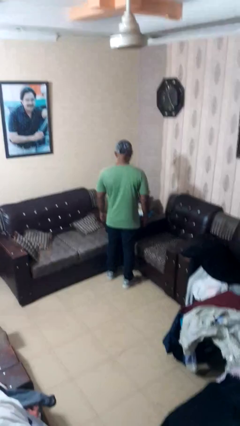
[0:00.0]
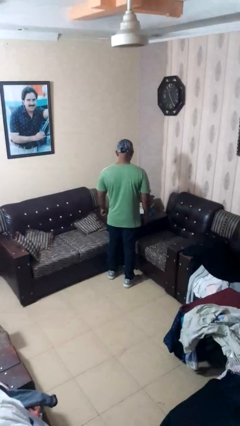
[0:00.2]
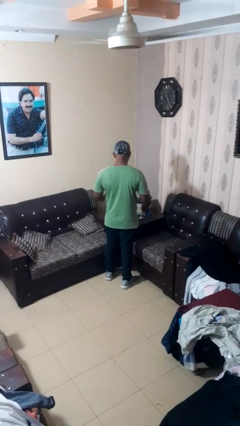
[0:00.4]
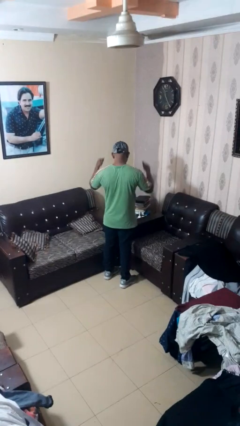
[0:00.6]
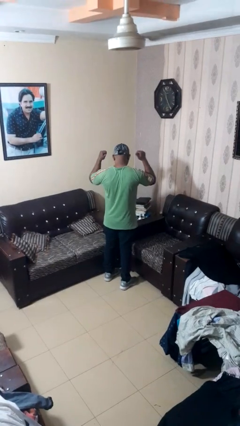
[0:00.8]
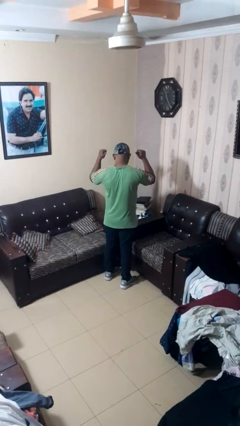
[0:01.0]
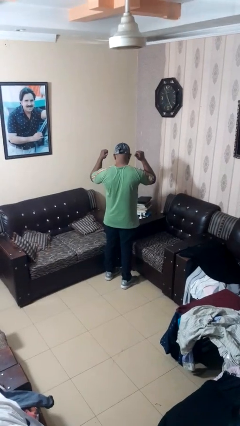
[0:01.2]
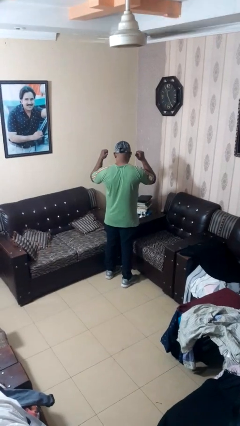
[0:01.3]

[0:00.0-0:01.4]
person gestures behind me

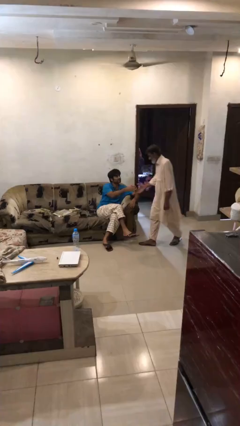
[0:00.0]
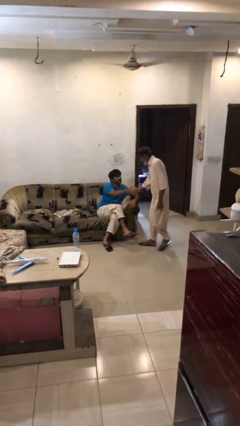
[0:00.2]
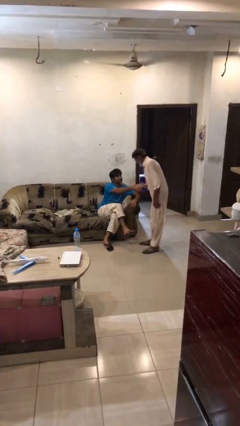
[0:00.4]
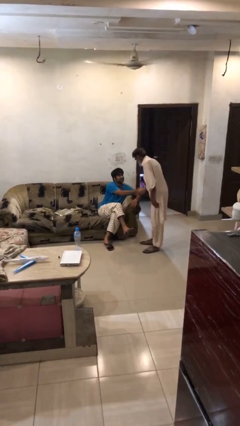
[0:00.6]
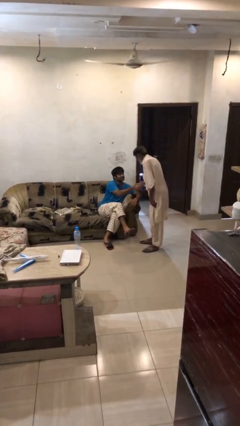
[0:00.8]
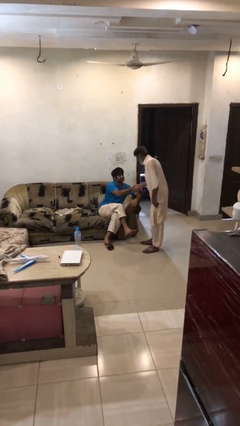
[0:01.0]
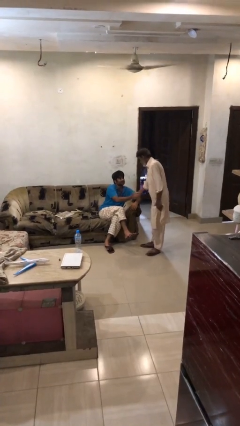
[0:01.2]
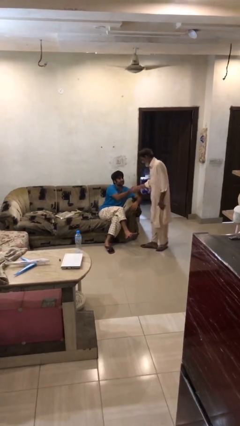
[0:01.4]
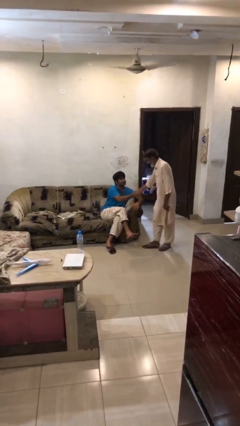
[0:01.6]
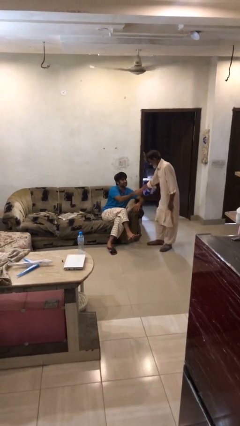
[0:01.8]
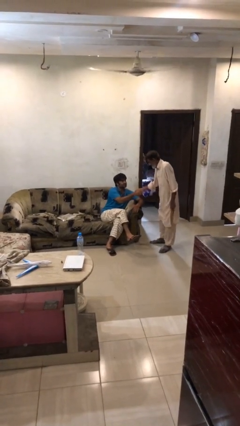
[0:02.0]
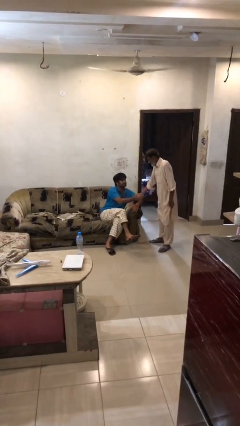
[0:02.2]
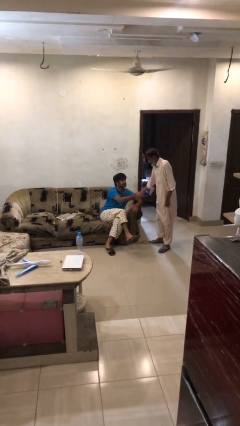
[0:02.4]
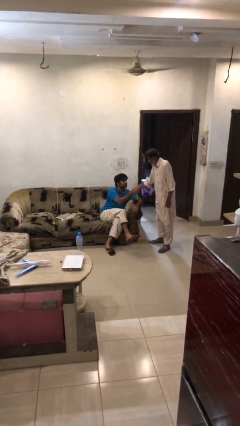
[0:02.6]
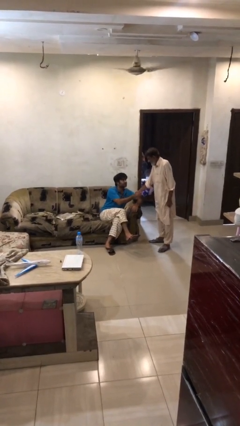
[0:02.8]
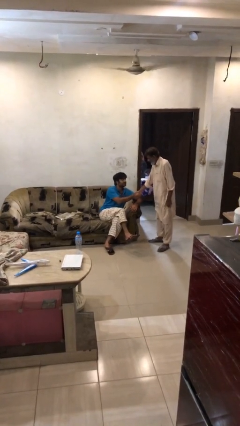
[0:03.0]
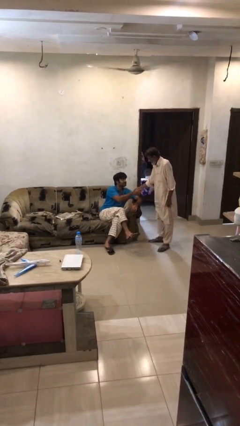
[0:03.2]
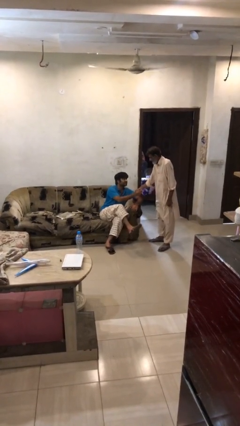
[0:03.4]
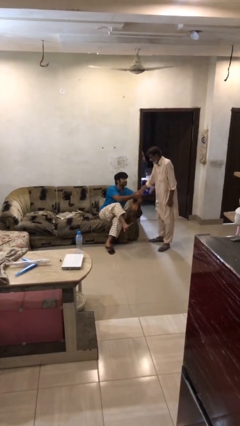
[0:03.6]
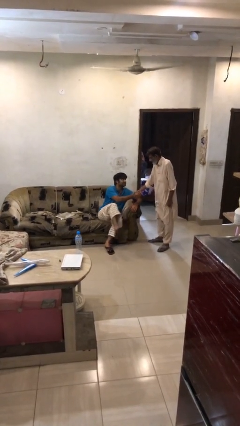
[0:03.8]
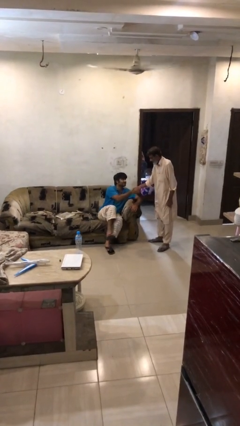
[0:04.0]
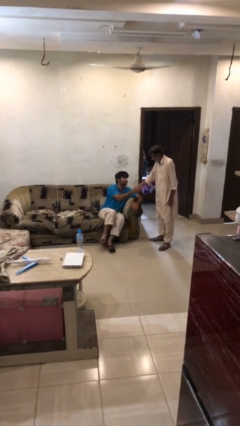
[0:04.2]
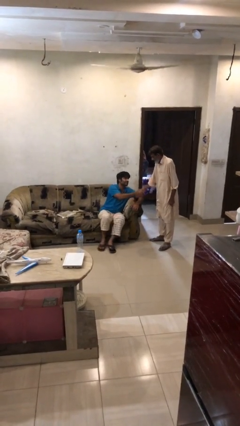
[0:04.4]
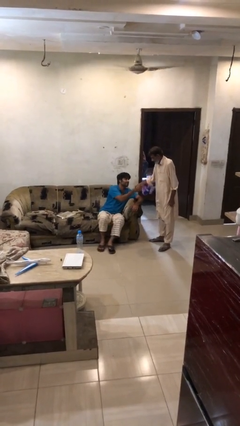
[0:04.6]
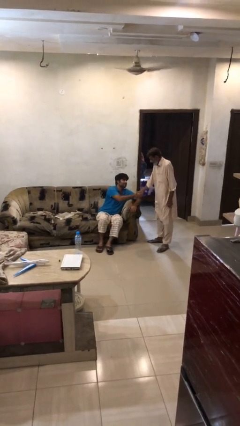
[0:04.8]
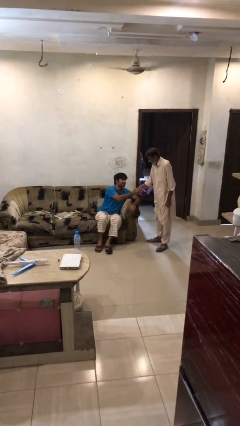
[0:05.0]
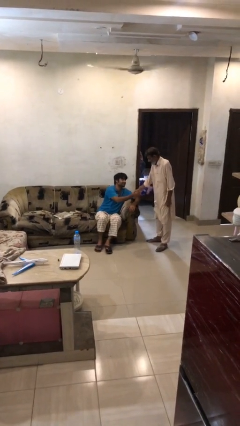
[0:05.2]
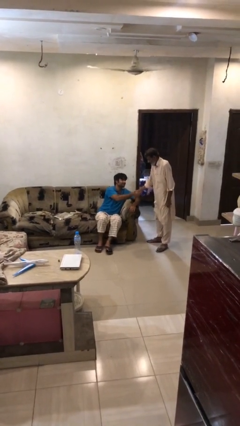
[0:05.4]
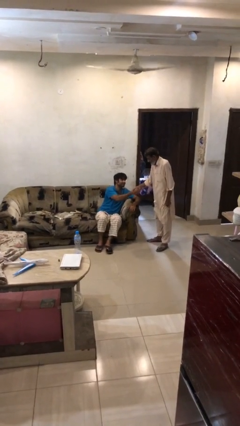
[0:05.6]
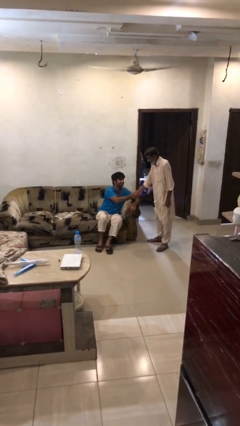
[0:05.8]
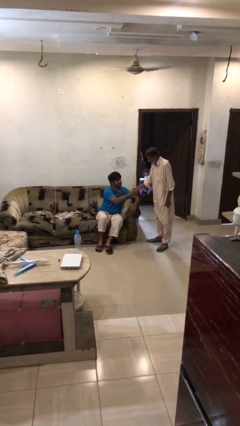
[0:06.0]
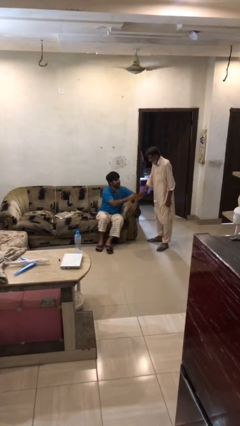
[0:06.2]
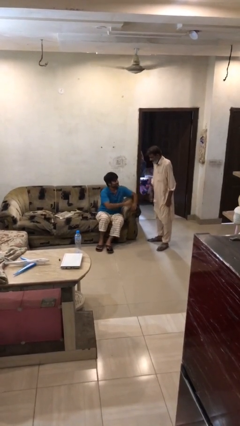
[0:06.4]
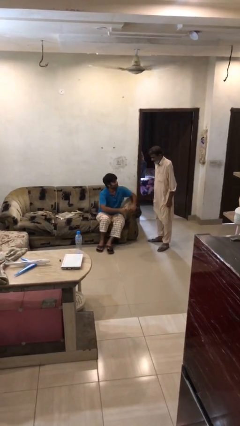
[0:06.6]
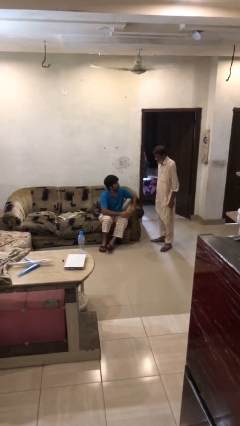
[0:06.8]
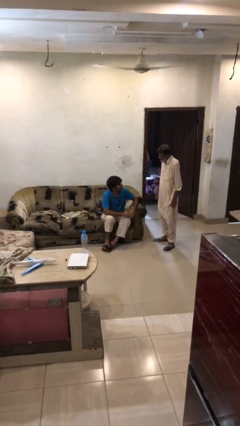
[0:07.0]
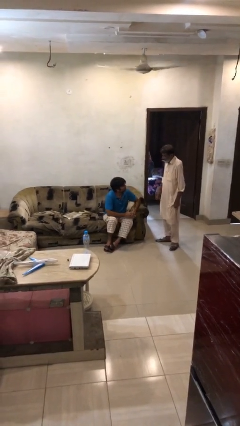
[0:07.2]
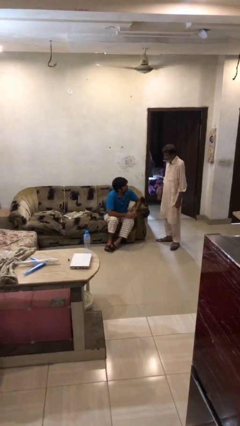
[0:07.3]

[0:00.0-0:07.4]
person shakes hand

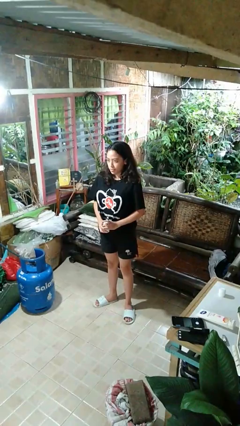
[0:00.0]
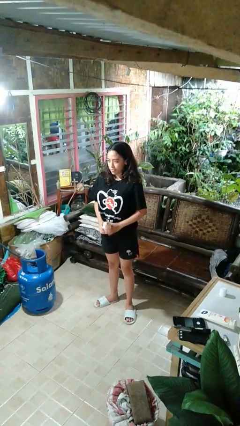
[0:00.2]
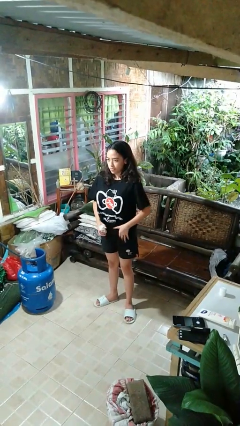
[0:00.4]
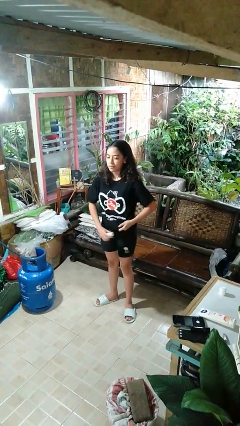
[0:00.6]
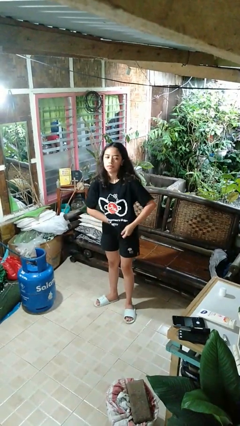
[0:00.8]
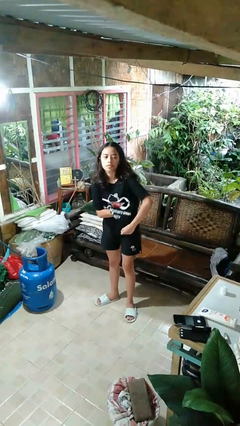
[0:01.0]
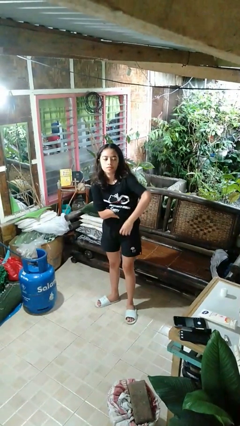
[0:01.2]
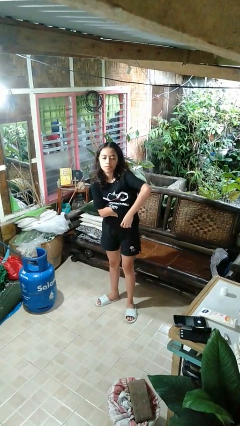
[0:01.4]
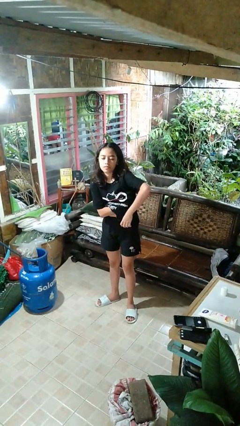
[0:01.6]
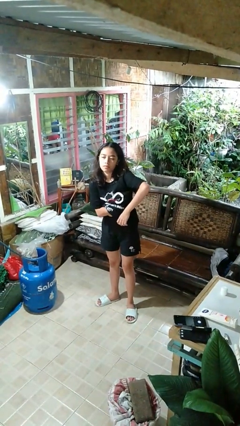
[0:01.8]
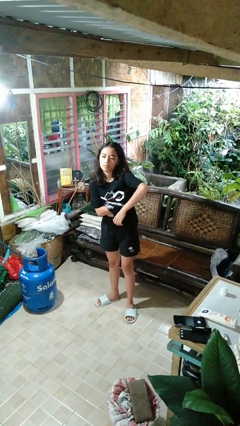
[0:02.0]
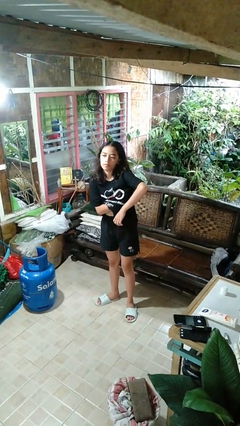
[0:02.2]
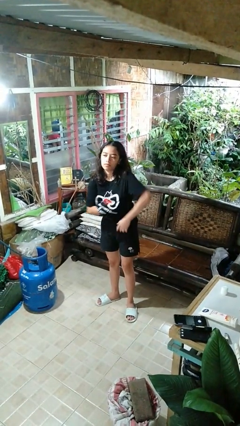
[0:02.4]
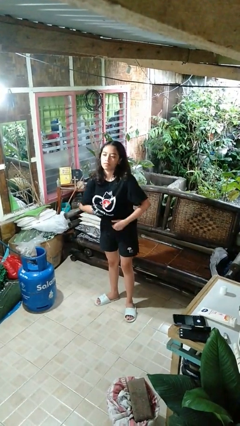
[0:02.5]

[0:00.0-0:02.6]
person applies deodorant

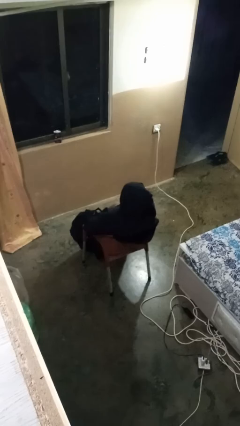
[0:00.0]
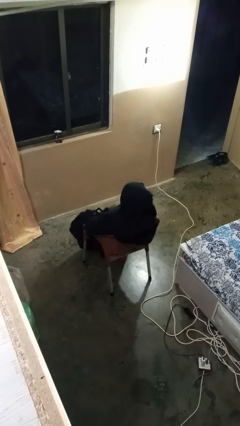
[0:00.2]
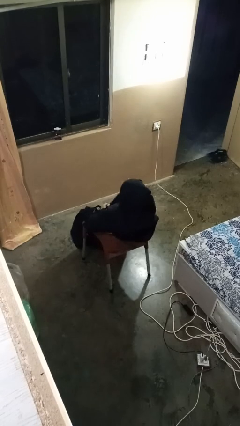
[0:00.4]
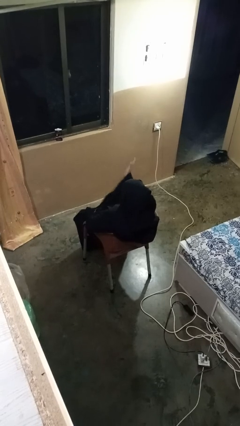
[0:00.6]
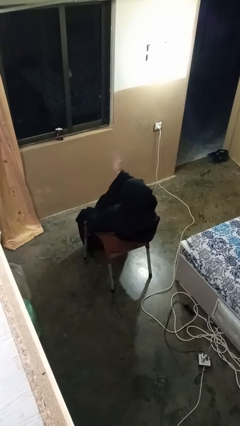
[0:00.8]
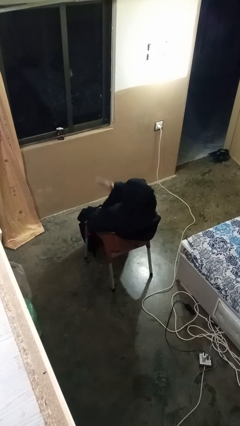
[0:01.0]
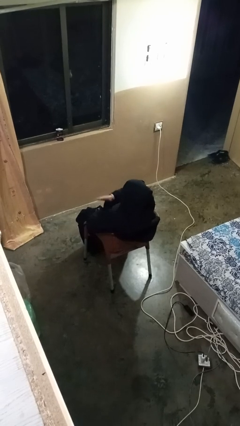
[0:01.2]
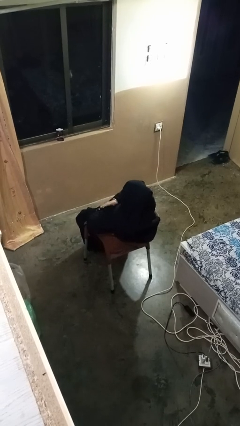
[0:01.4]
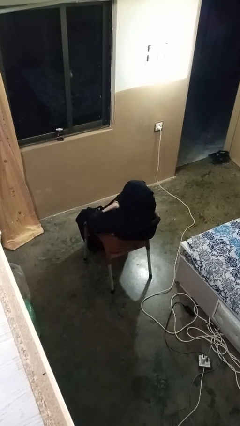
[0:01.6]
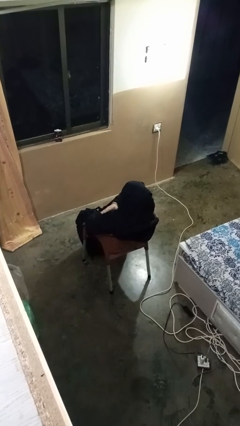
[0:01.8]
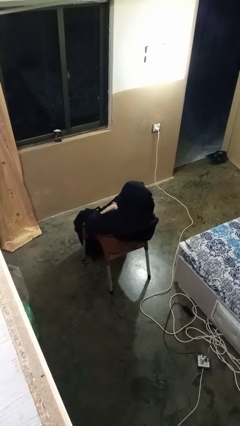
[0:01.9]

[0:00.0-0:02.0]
person gestures swipe left

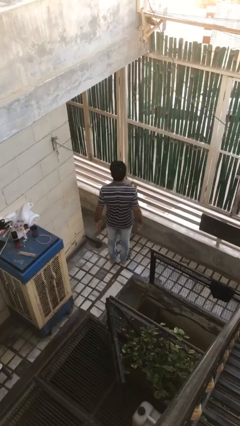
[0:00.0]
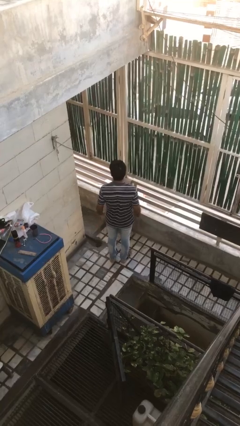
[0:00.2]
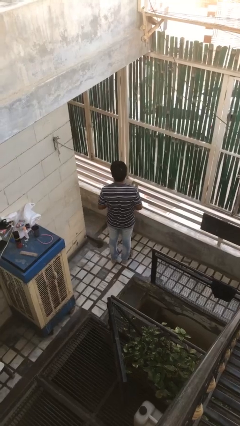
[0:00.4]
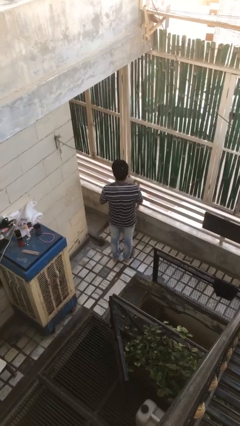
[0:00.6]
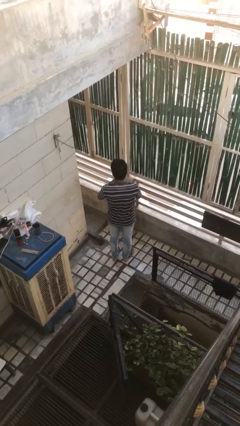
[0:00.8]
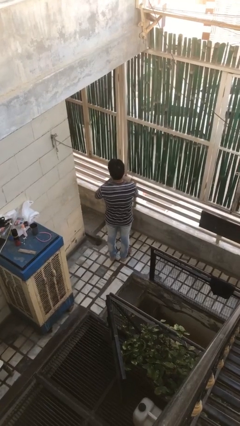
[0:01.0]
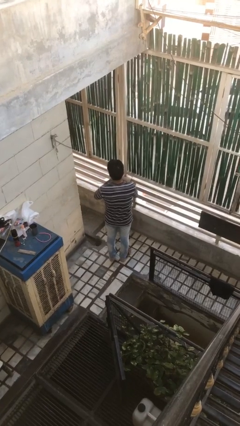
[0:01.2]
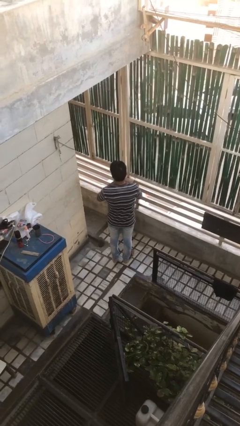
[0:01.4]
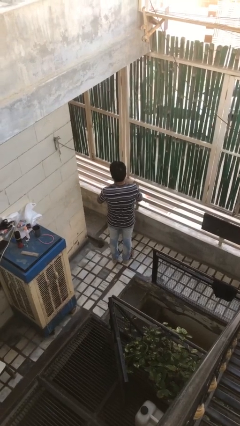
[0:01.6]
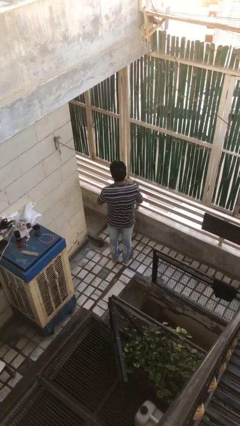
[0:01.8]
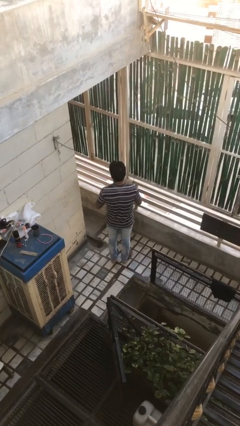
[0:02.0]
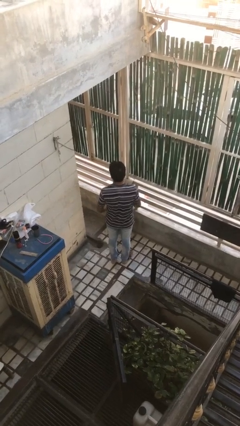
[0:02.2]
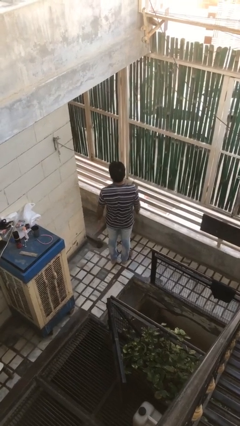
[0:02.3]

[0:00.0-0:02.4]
person takes off ring

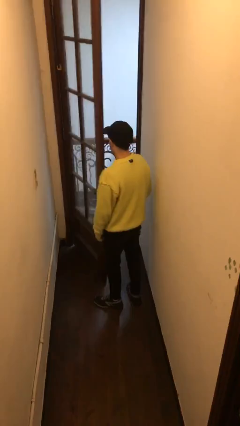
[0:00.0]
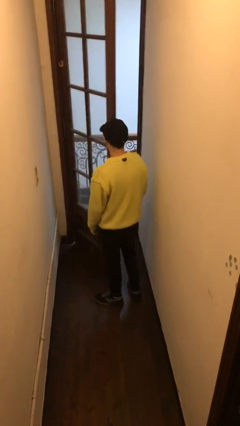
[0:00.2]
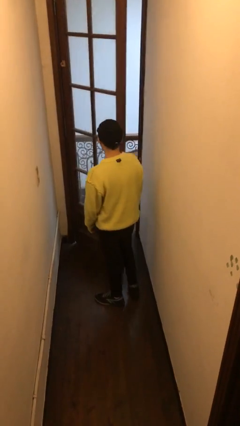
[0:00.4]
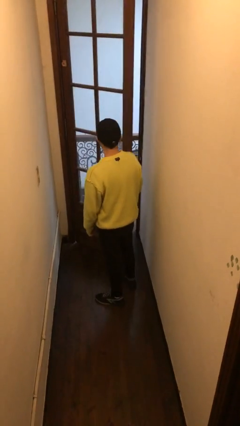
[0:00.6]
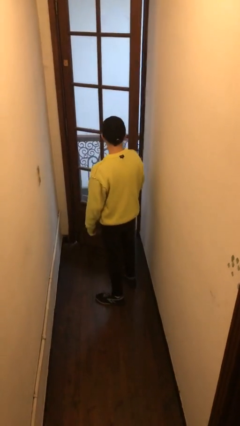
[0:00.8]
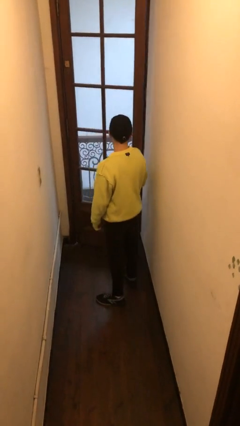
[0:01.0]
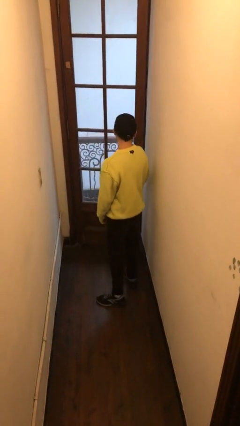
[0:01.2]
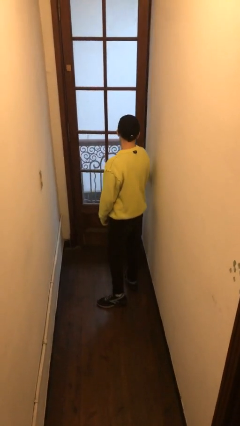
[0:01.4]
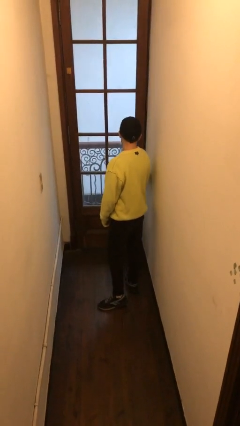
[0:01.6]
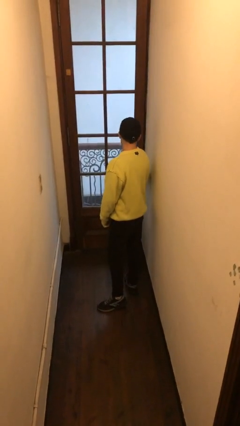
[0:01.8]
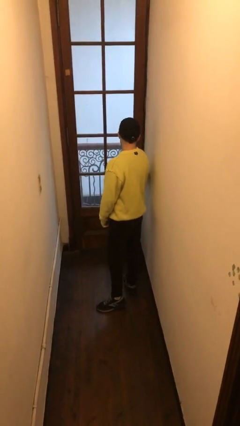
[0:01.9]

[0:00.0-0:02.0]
person closes facility door
